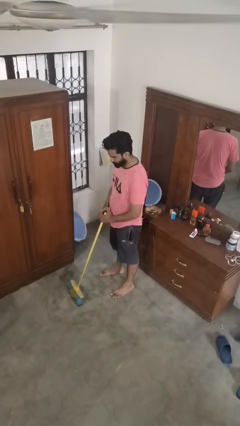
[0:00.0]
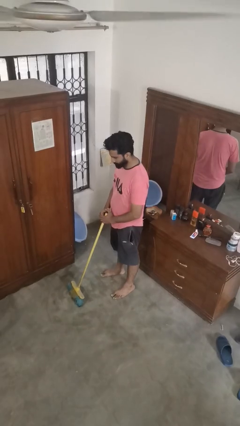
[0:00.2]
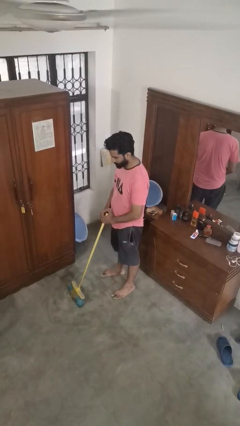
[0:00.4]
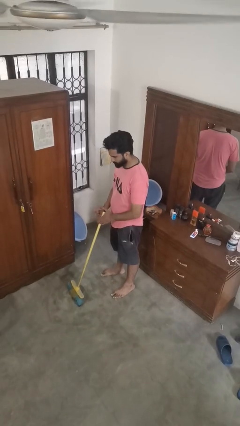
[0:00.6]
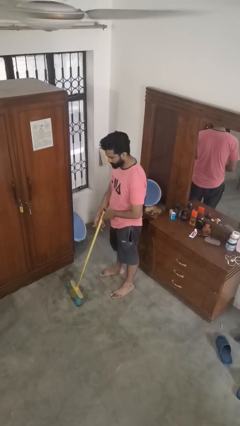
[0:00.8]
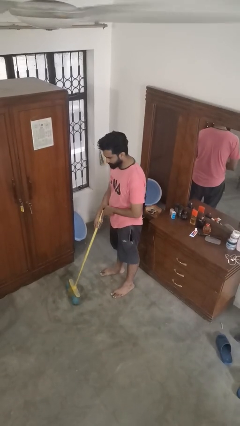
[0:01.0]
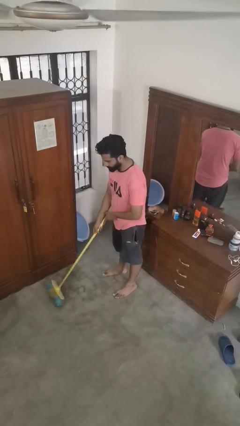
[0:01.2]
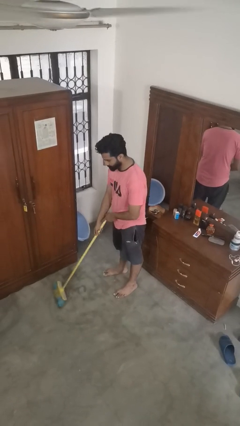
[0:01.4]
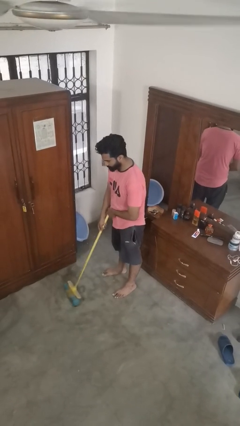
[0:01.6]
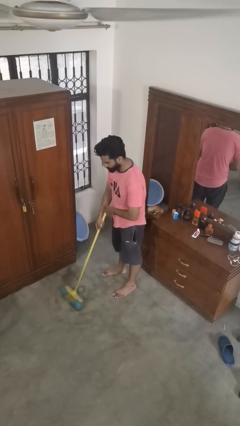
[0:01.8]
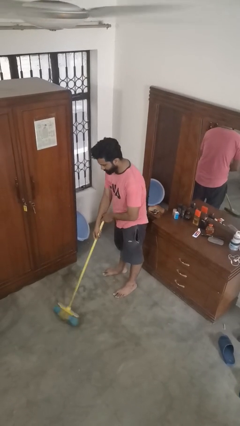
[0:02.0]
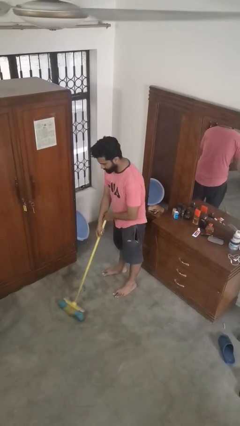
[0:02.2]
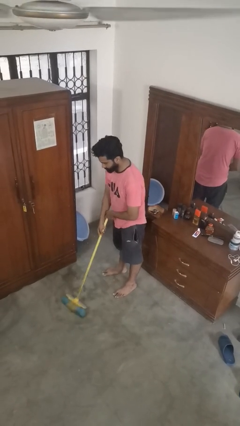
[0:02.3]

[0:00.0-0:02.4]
person sweeps floor

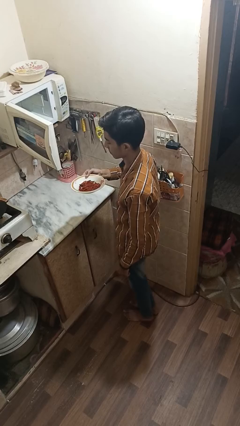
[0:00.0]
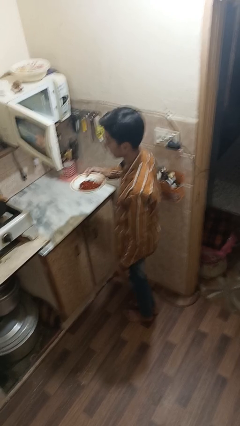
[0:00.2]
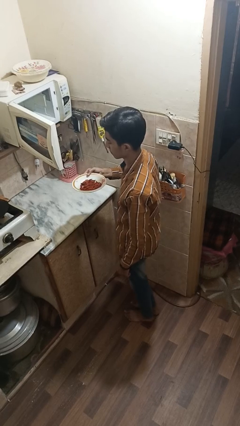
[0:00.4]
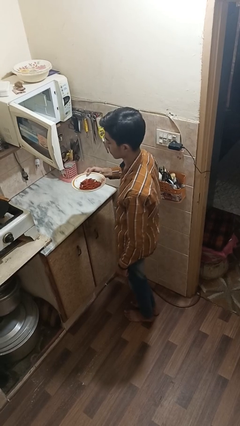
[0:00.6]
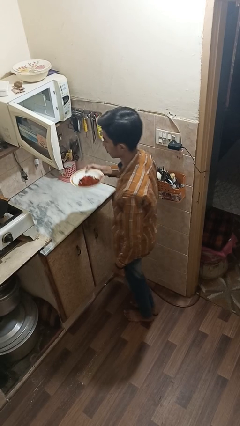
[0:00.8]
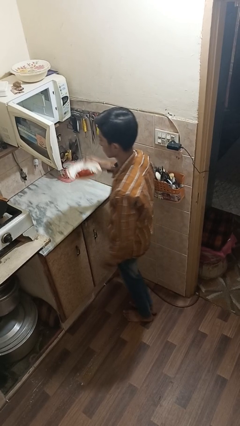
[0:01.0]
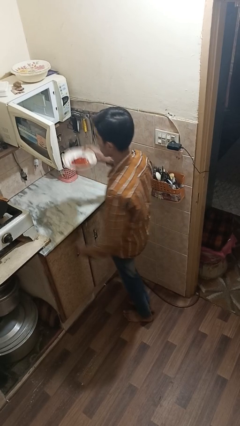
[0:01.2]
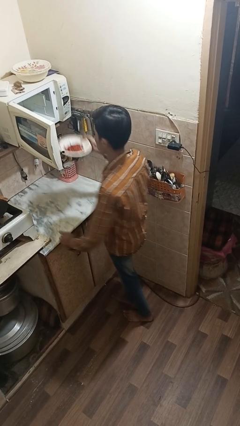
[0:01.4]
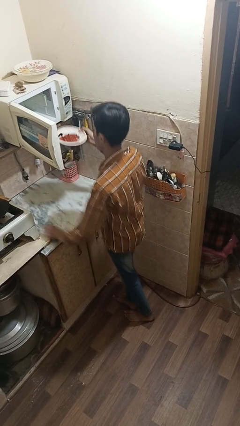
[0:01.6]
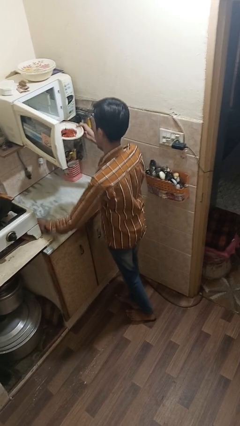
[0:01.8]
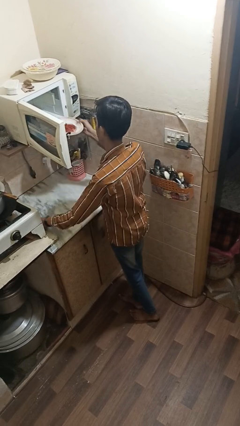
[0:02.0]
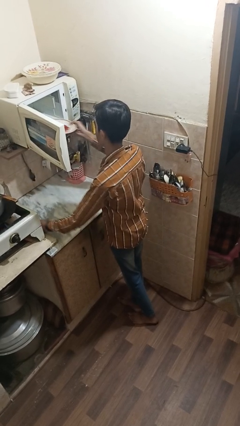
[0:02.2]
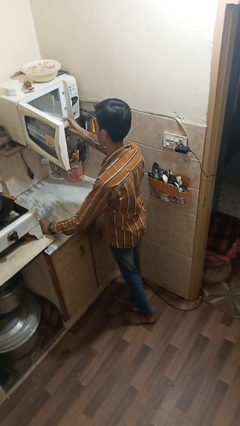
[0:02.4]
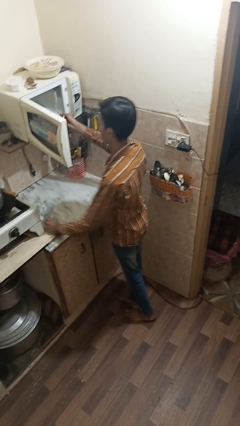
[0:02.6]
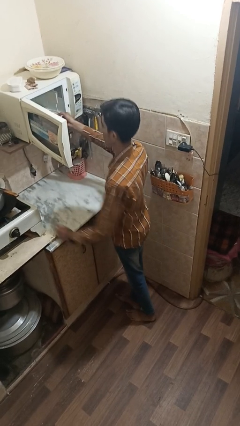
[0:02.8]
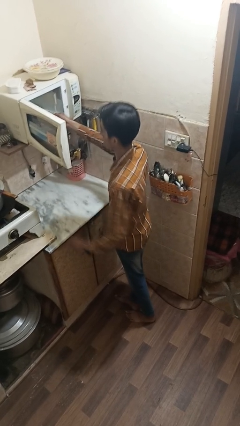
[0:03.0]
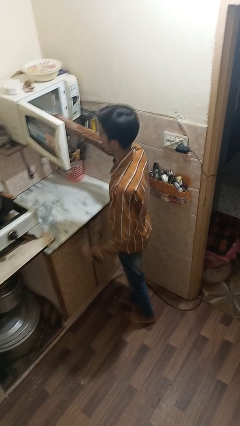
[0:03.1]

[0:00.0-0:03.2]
person puts object into microwave

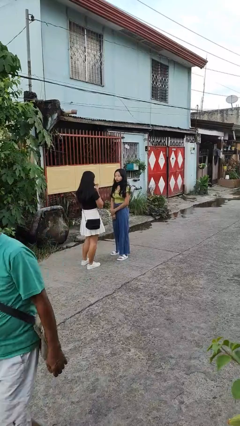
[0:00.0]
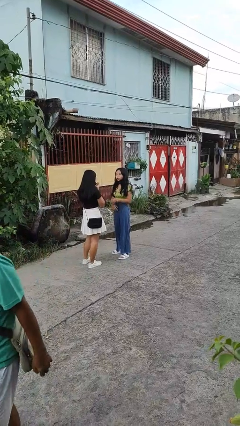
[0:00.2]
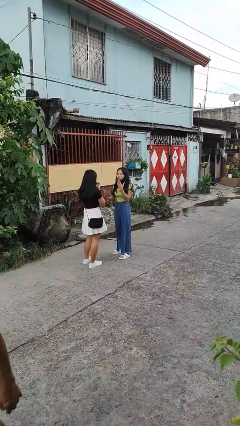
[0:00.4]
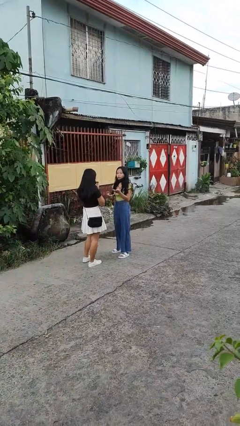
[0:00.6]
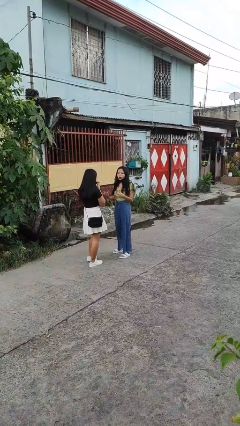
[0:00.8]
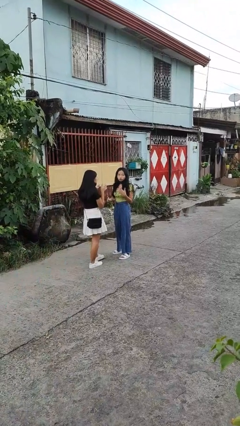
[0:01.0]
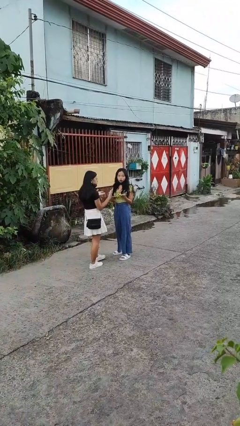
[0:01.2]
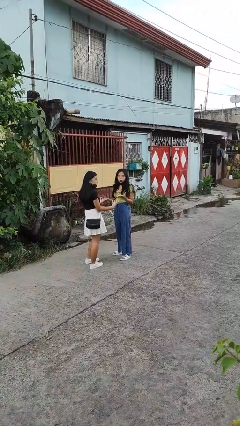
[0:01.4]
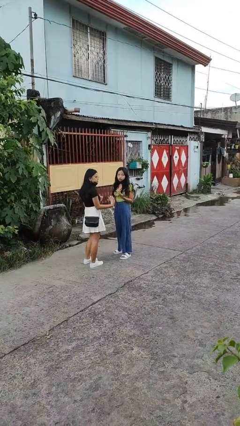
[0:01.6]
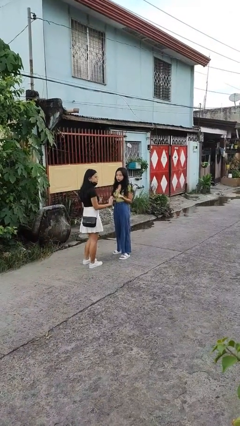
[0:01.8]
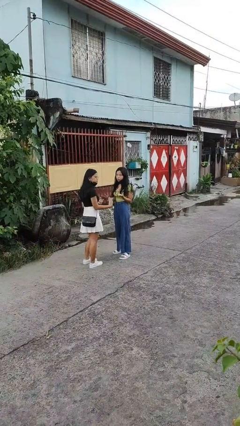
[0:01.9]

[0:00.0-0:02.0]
person talks to person

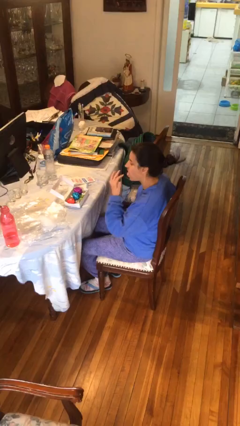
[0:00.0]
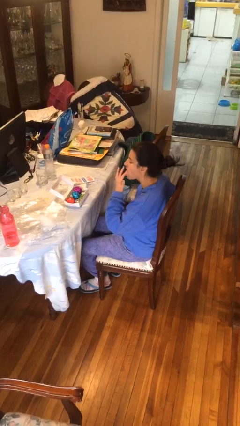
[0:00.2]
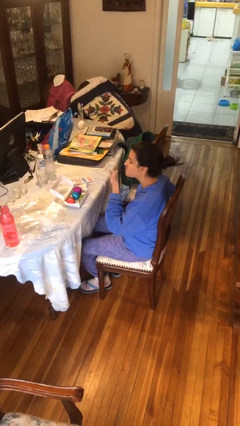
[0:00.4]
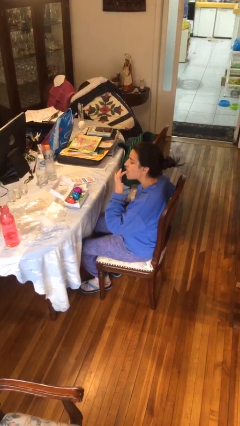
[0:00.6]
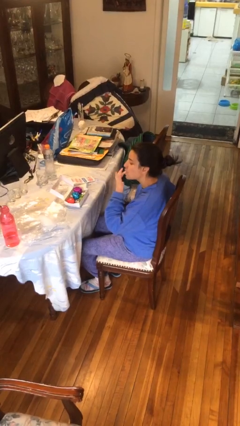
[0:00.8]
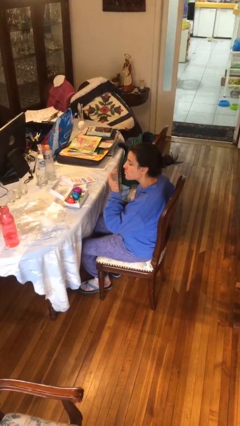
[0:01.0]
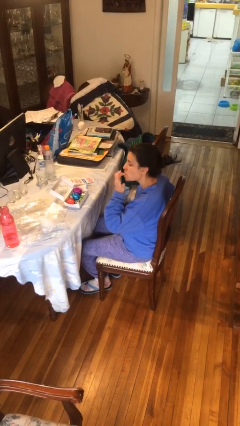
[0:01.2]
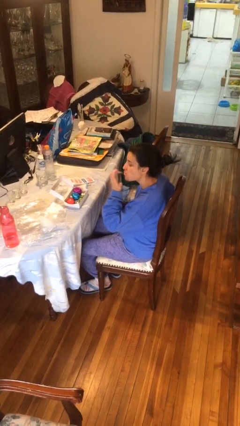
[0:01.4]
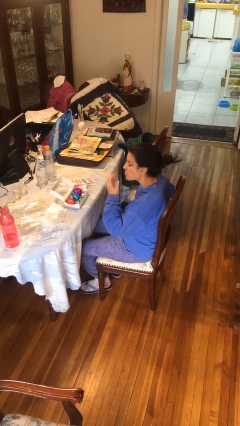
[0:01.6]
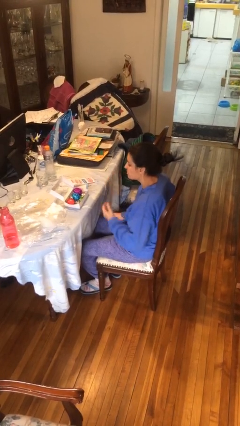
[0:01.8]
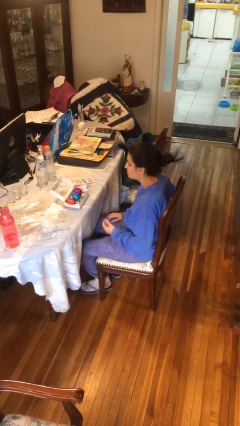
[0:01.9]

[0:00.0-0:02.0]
person licks fingers

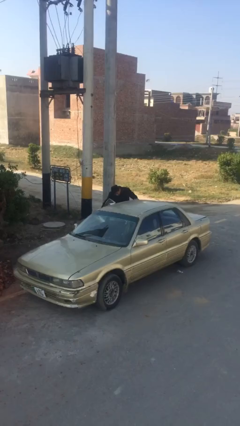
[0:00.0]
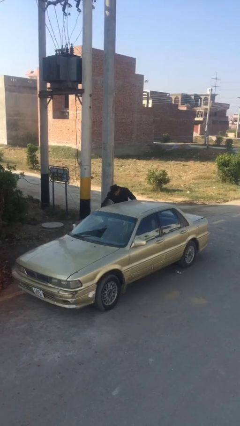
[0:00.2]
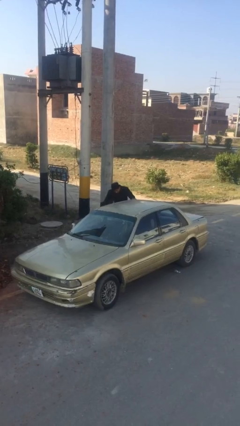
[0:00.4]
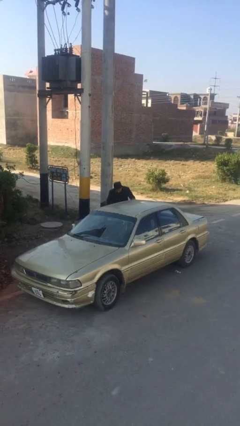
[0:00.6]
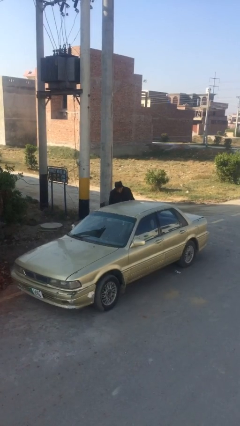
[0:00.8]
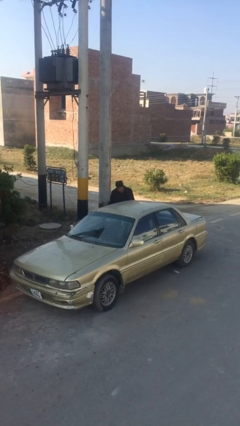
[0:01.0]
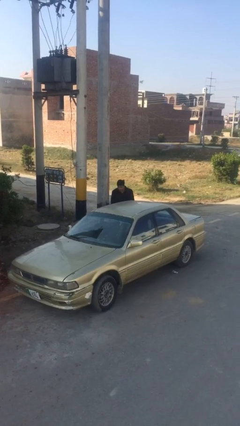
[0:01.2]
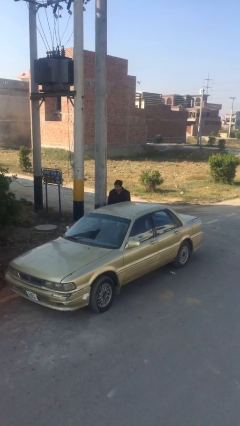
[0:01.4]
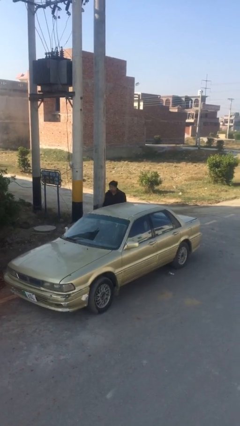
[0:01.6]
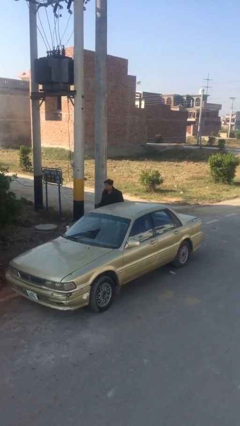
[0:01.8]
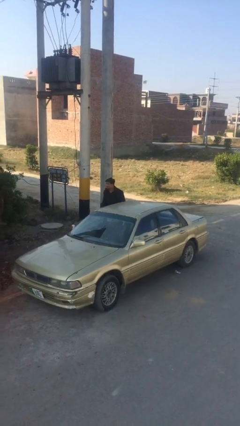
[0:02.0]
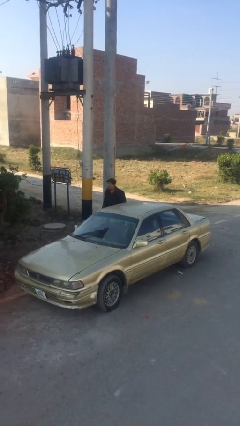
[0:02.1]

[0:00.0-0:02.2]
person closes car door

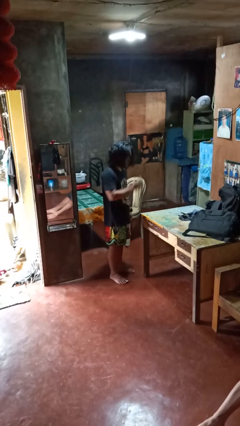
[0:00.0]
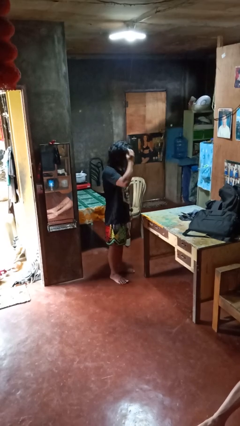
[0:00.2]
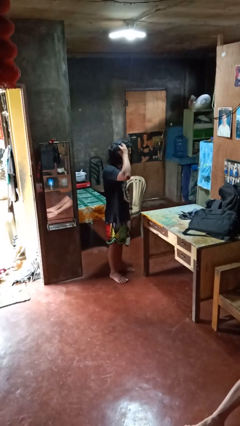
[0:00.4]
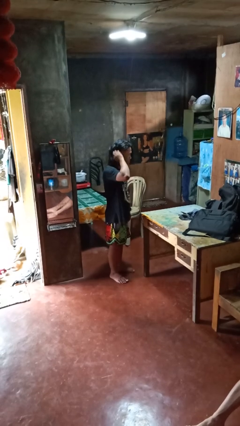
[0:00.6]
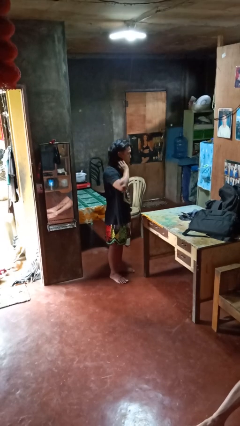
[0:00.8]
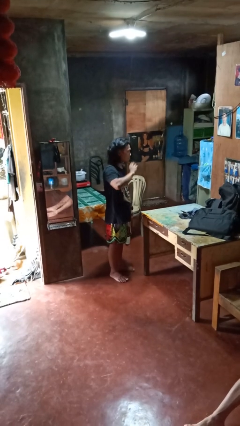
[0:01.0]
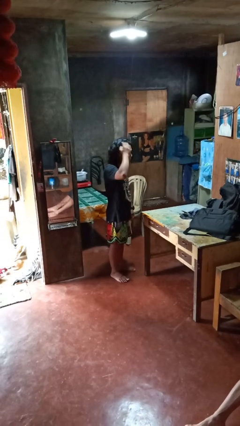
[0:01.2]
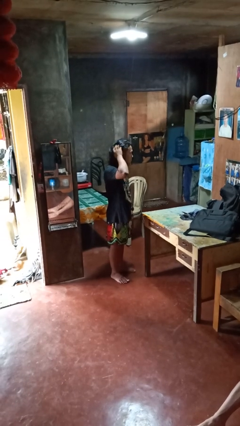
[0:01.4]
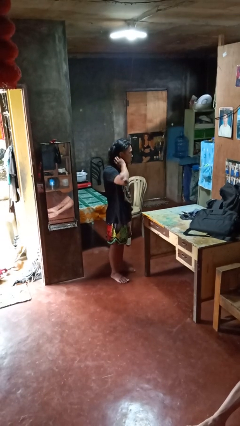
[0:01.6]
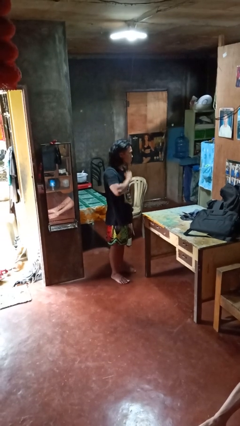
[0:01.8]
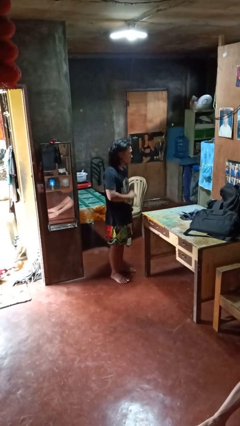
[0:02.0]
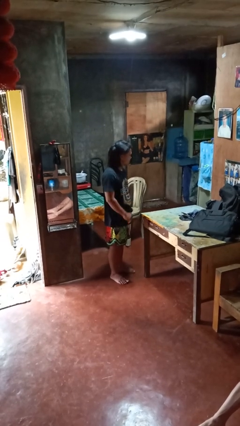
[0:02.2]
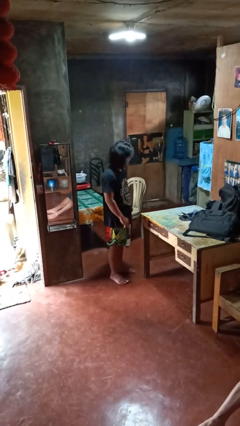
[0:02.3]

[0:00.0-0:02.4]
person strokes hair

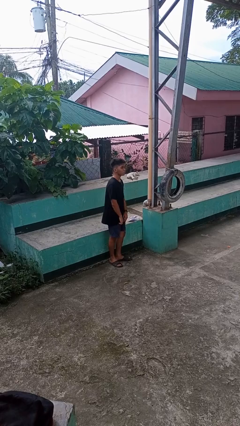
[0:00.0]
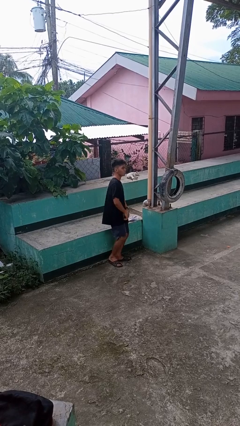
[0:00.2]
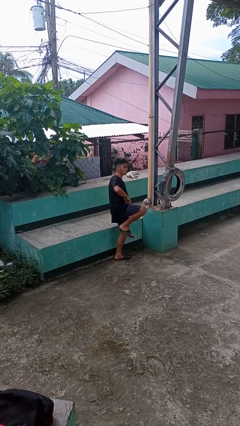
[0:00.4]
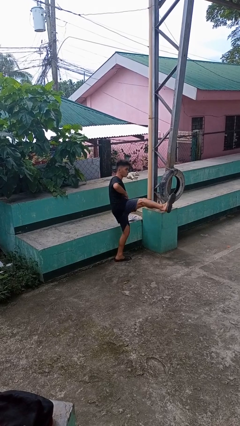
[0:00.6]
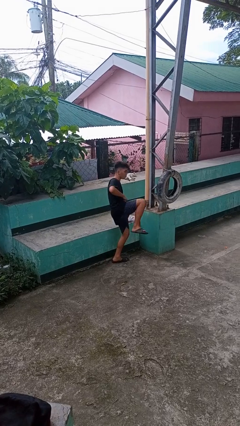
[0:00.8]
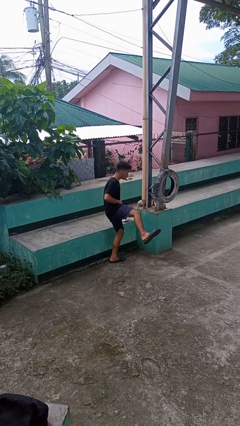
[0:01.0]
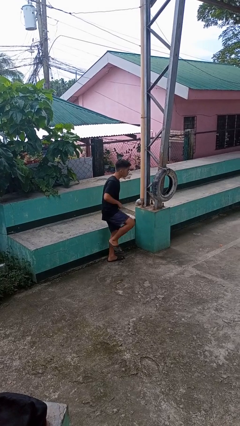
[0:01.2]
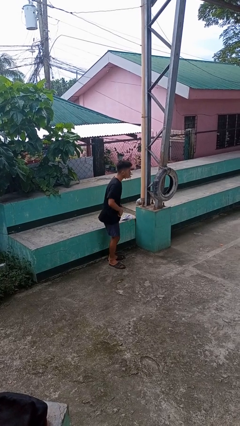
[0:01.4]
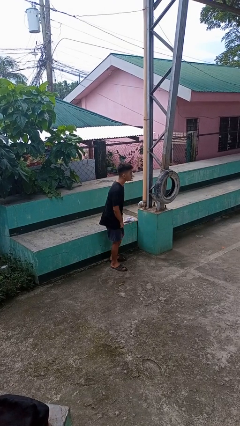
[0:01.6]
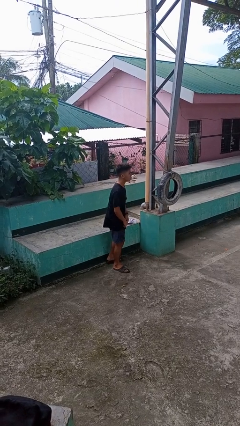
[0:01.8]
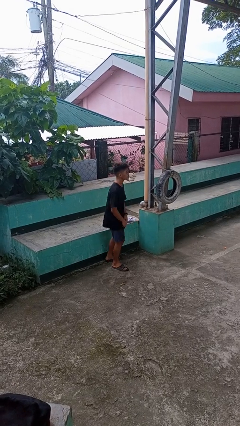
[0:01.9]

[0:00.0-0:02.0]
person karate kicks

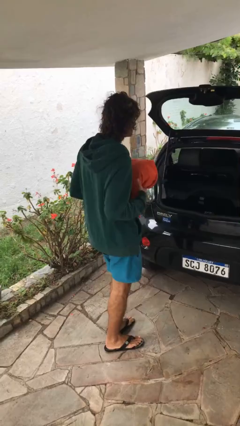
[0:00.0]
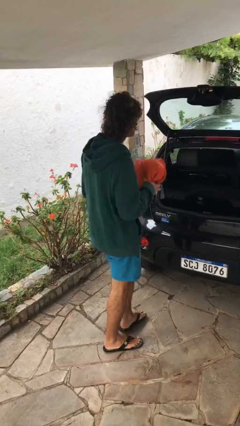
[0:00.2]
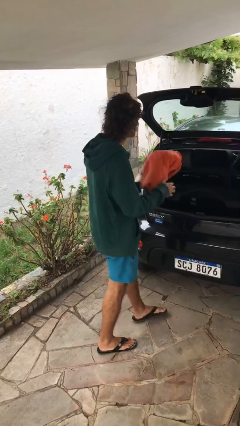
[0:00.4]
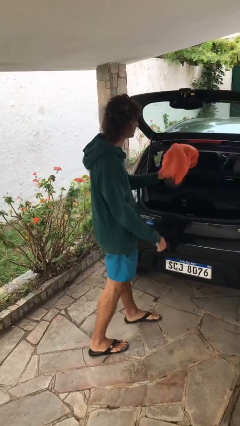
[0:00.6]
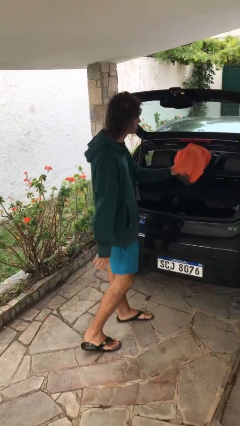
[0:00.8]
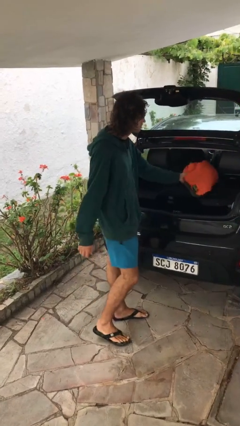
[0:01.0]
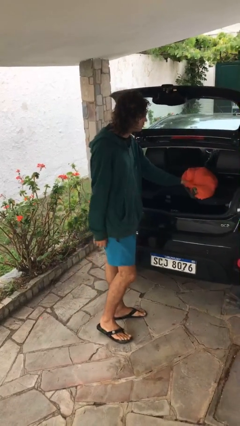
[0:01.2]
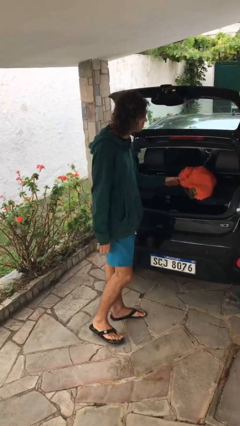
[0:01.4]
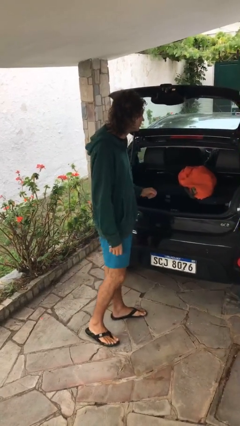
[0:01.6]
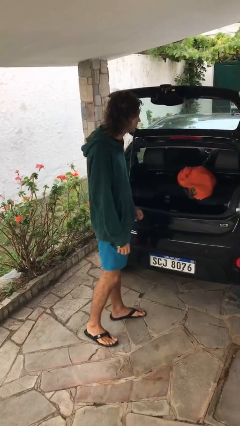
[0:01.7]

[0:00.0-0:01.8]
person loads car
